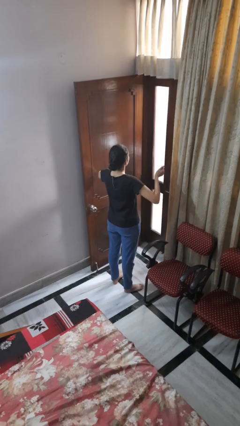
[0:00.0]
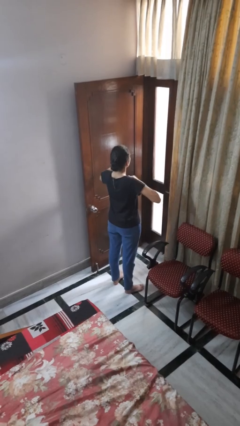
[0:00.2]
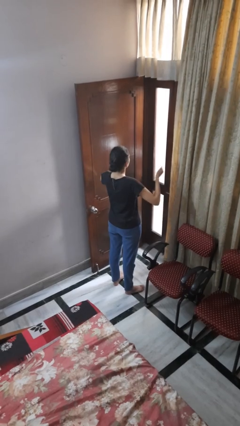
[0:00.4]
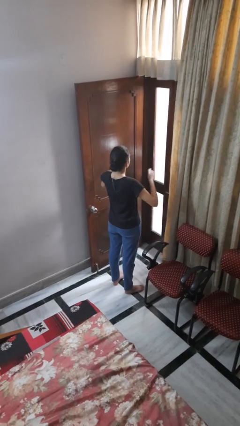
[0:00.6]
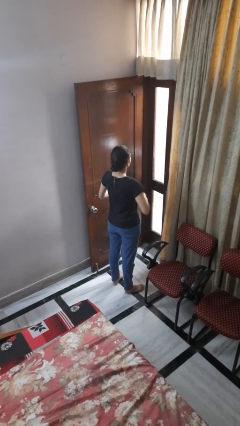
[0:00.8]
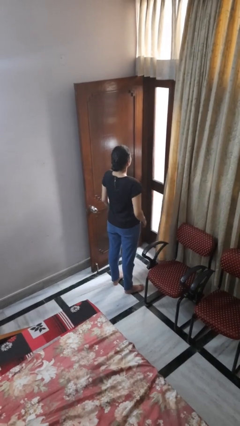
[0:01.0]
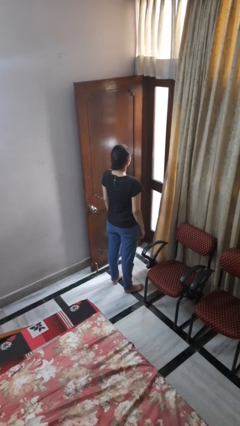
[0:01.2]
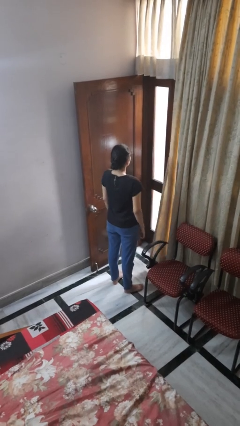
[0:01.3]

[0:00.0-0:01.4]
person drums on chest

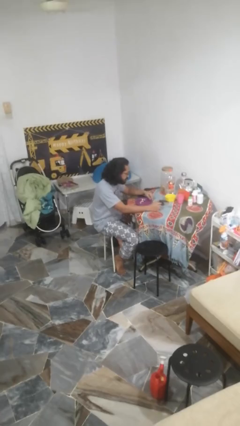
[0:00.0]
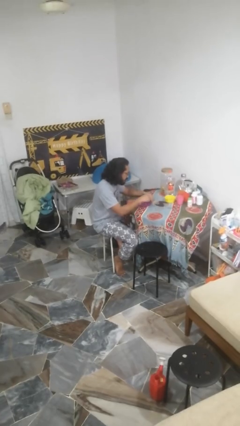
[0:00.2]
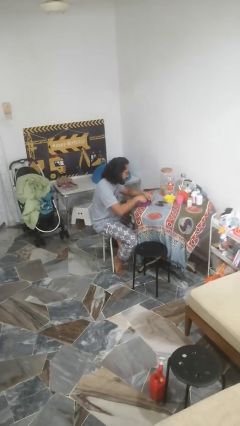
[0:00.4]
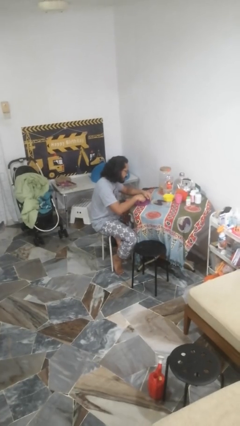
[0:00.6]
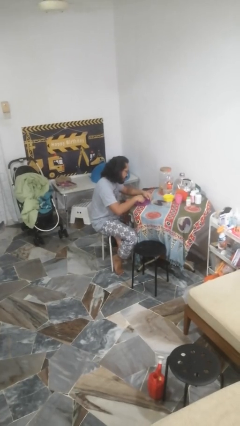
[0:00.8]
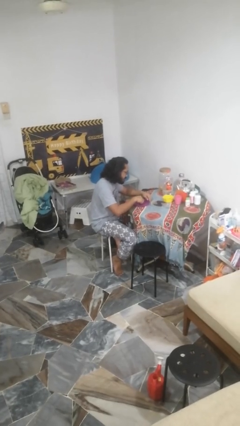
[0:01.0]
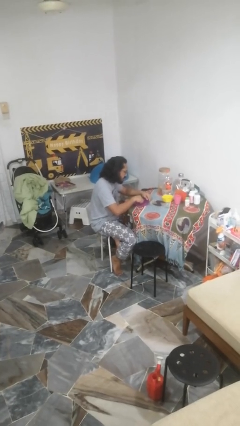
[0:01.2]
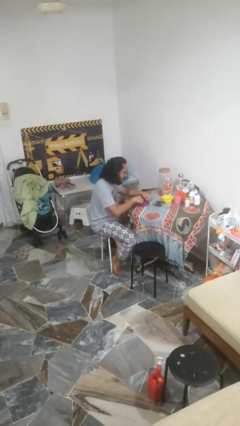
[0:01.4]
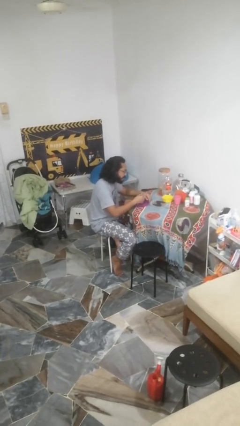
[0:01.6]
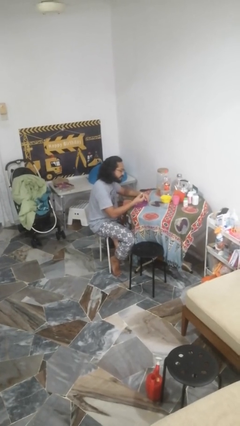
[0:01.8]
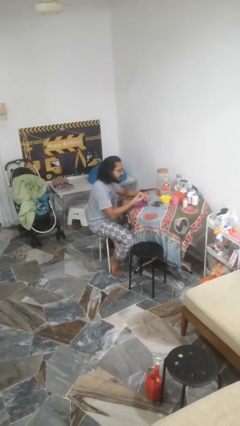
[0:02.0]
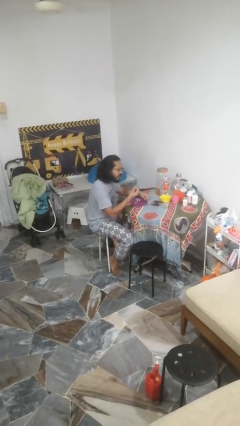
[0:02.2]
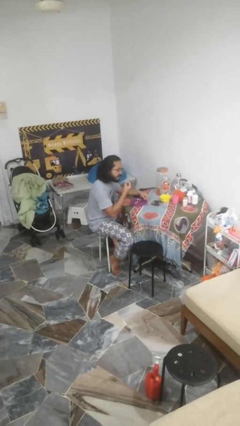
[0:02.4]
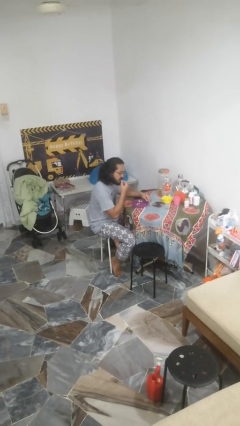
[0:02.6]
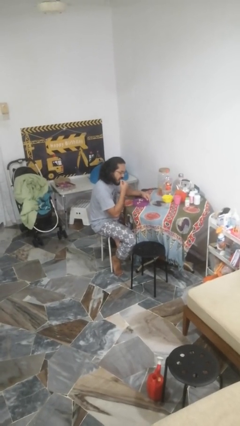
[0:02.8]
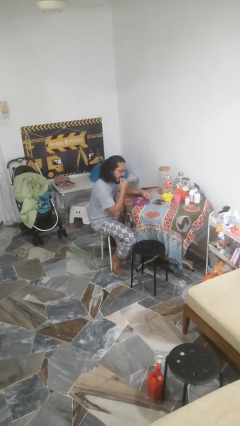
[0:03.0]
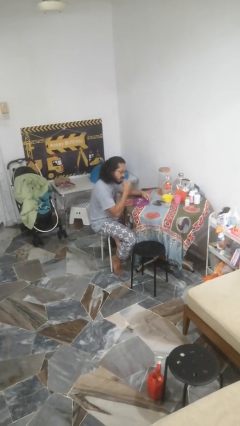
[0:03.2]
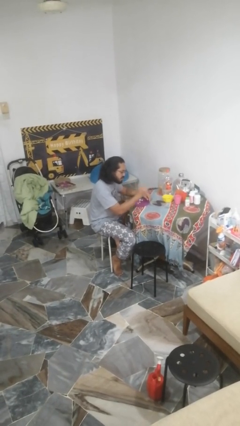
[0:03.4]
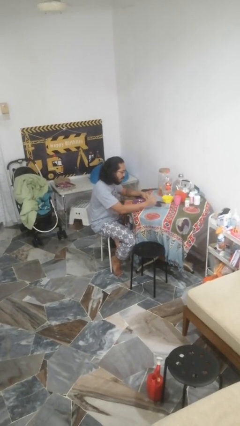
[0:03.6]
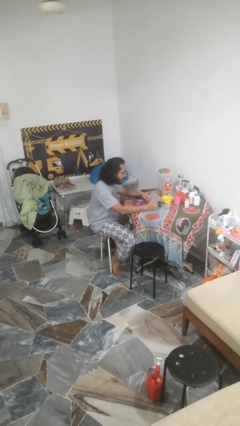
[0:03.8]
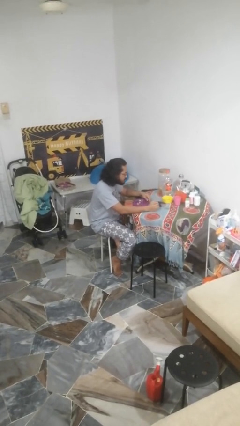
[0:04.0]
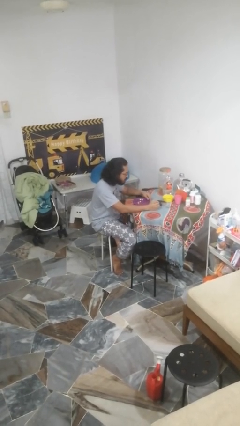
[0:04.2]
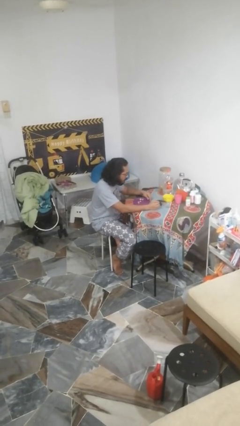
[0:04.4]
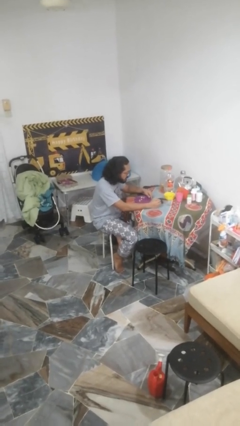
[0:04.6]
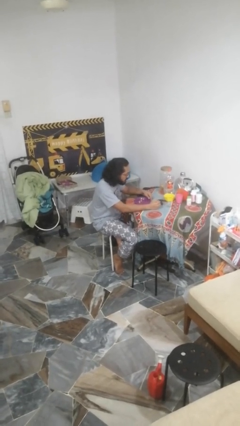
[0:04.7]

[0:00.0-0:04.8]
person eats with hands

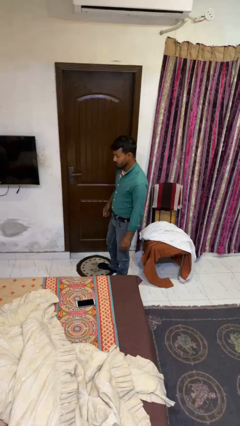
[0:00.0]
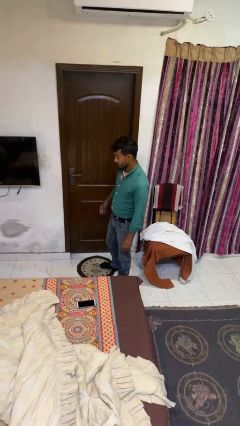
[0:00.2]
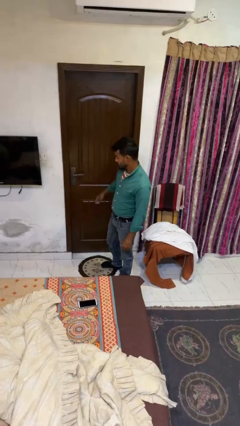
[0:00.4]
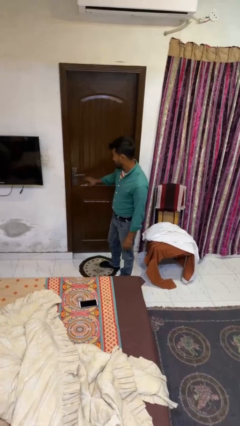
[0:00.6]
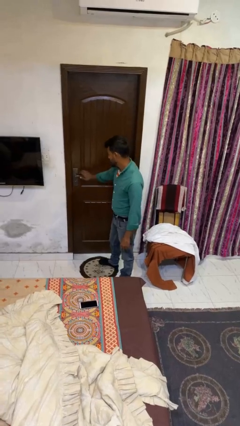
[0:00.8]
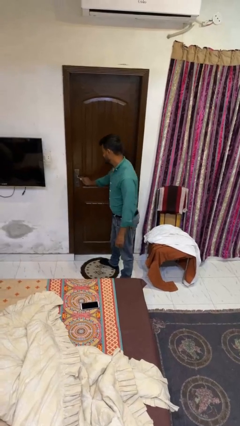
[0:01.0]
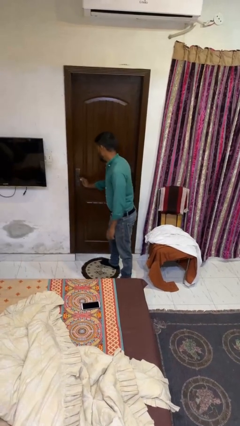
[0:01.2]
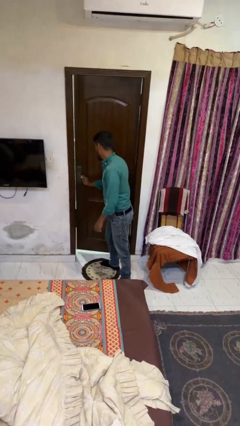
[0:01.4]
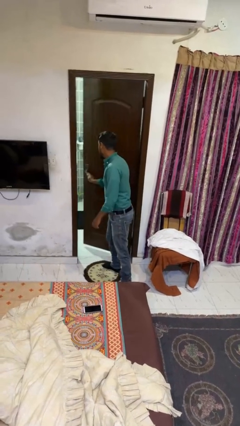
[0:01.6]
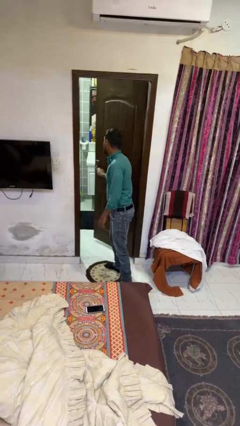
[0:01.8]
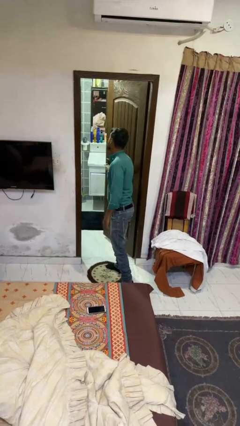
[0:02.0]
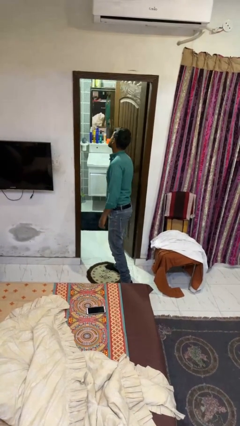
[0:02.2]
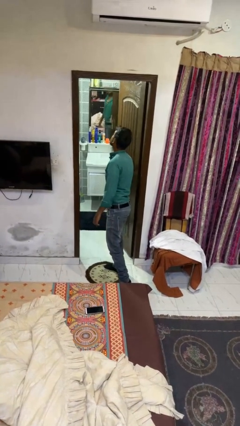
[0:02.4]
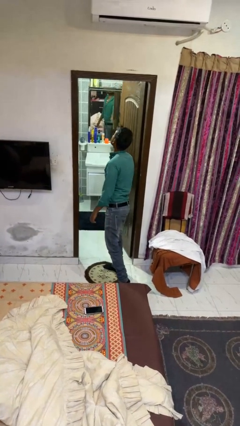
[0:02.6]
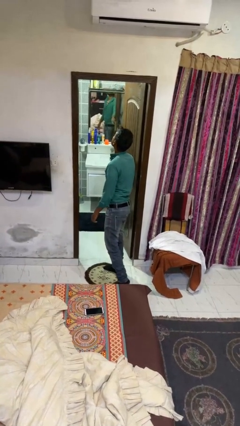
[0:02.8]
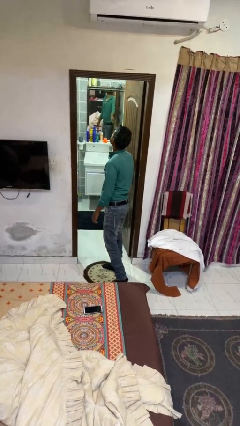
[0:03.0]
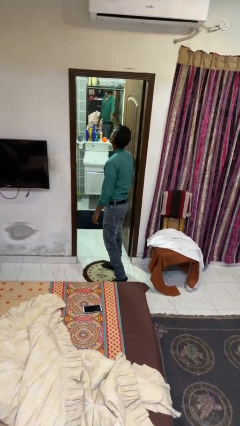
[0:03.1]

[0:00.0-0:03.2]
person opens facility door

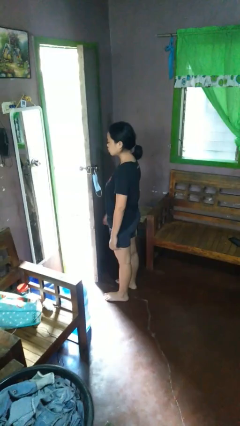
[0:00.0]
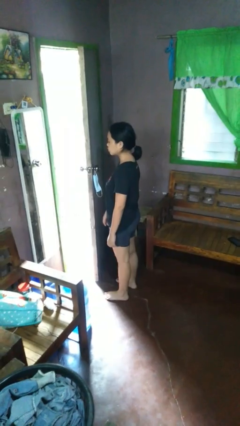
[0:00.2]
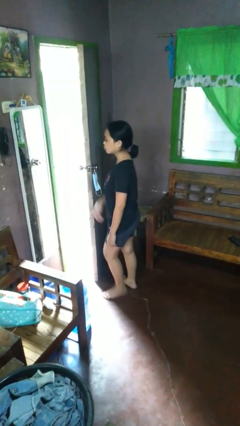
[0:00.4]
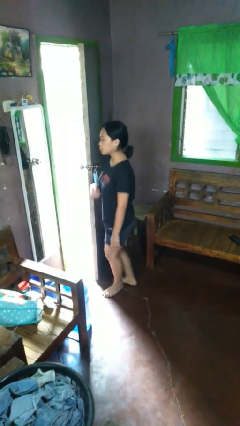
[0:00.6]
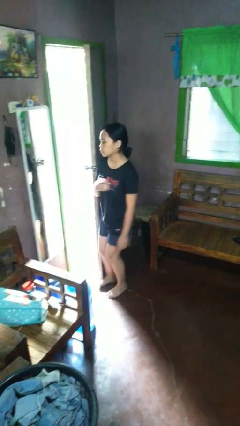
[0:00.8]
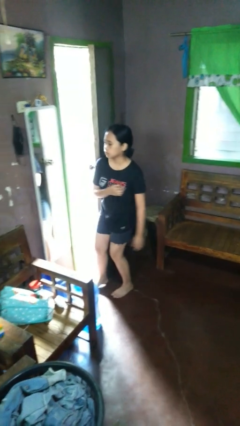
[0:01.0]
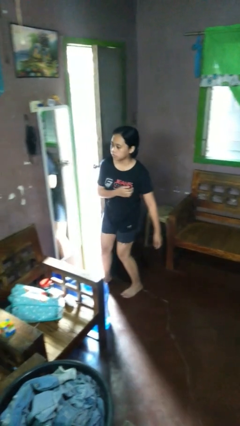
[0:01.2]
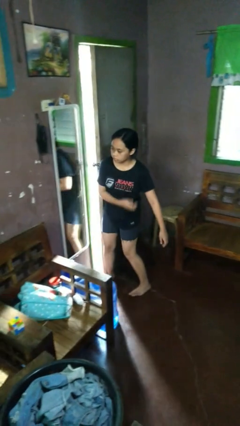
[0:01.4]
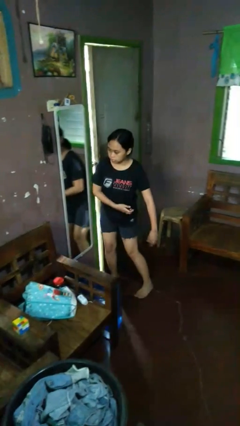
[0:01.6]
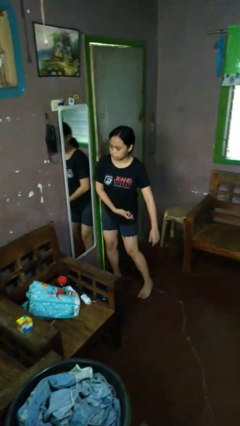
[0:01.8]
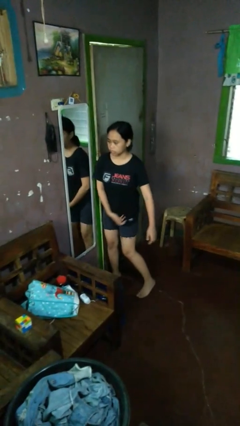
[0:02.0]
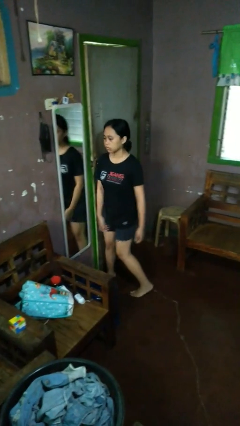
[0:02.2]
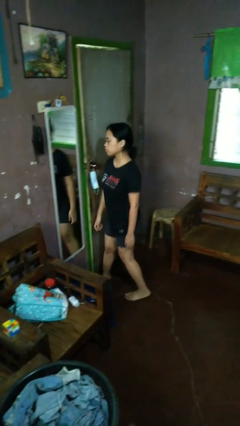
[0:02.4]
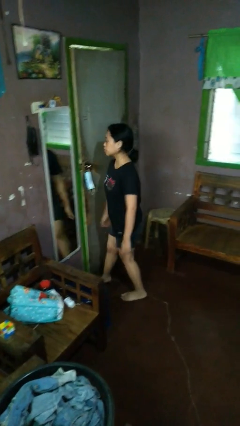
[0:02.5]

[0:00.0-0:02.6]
person closes door with hip

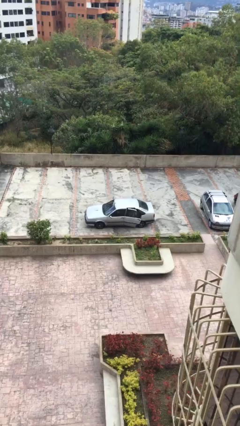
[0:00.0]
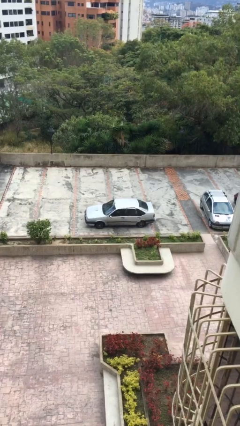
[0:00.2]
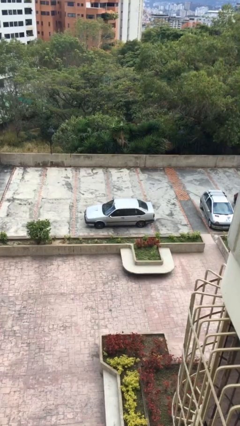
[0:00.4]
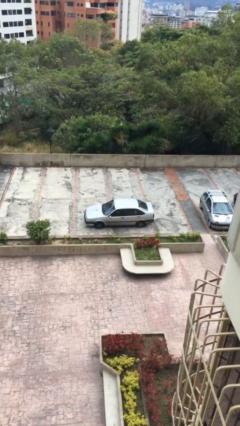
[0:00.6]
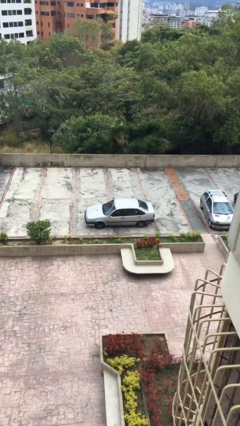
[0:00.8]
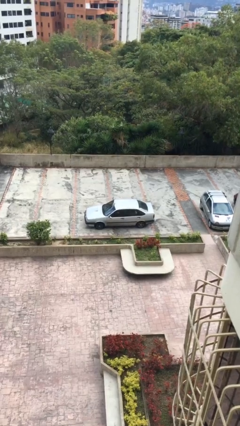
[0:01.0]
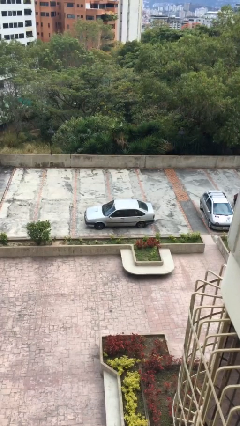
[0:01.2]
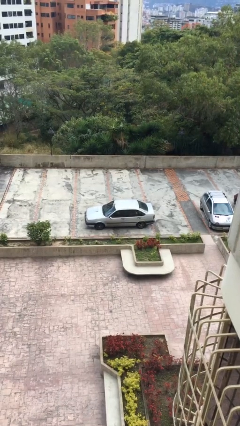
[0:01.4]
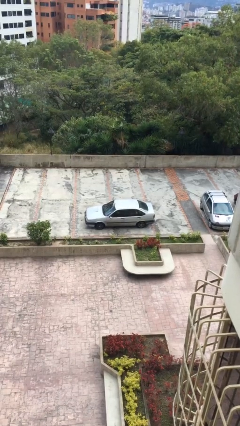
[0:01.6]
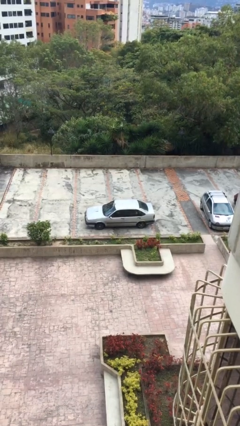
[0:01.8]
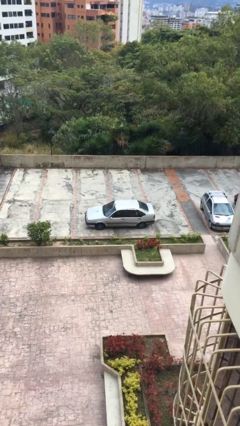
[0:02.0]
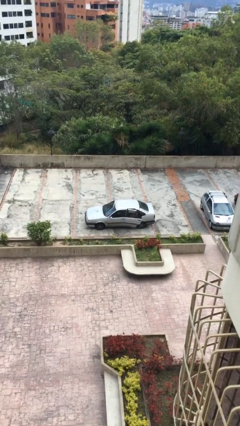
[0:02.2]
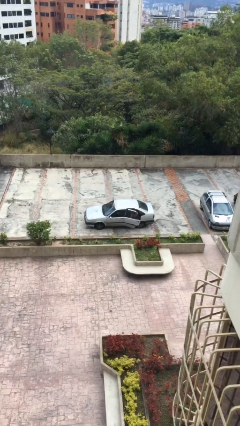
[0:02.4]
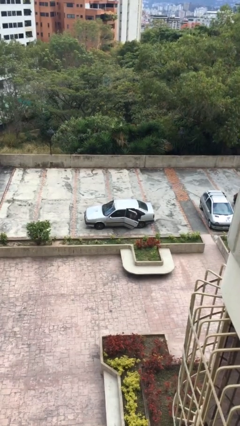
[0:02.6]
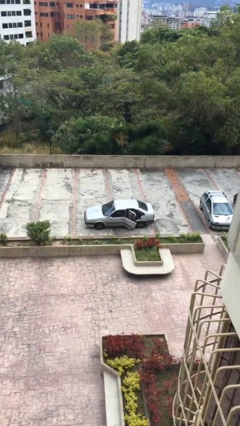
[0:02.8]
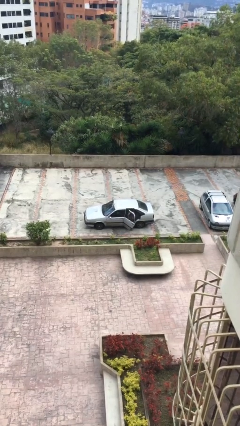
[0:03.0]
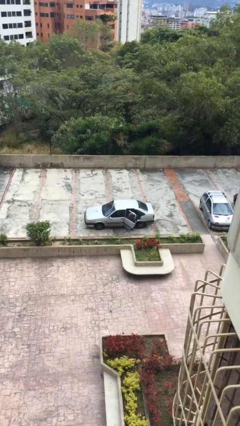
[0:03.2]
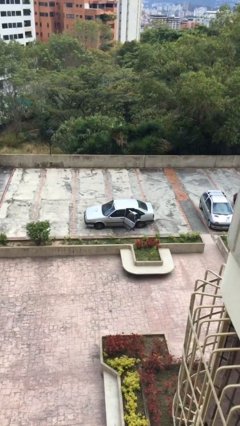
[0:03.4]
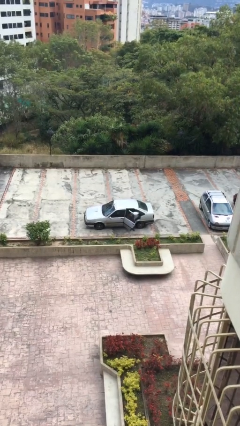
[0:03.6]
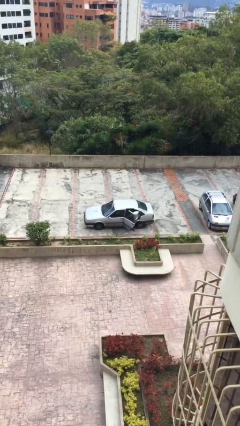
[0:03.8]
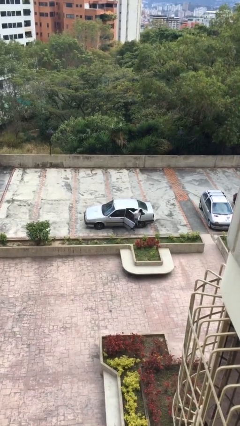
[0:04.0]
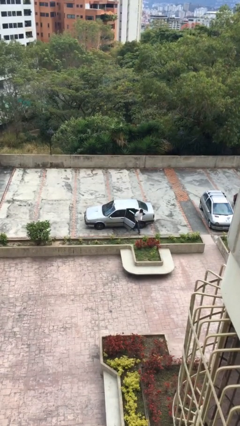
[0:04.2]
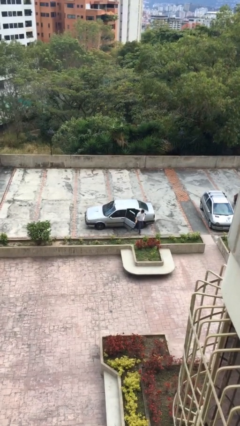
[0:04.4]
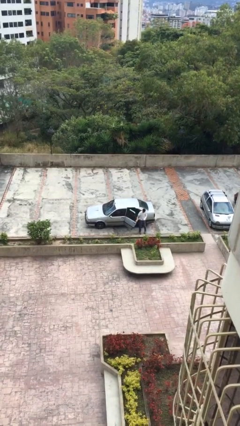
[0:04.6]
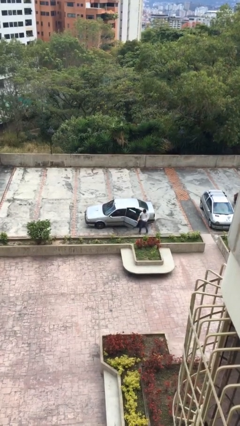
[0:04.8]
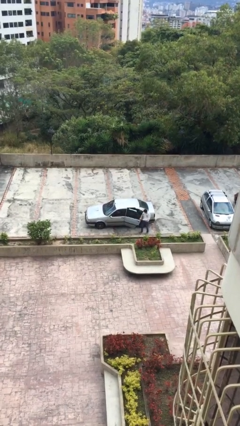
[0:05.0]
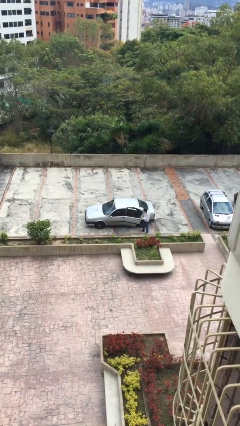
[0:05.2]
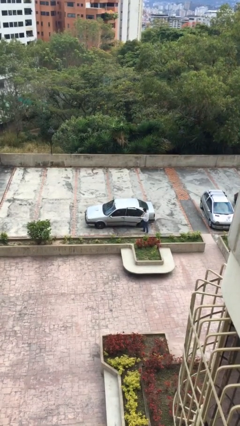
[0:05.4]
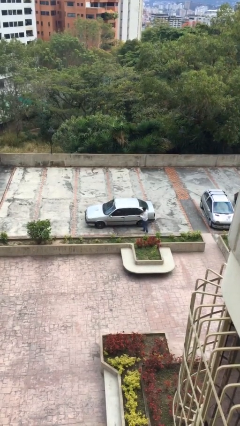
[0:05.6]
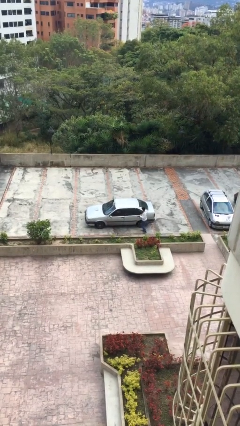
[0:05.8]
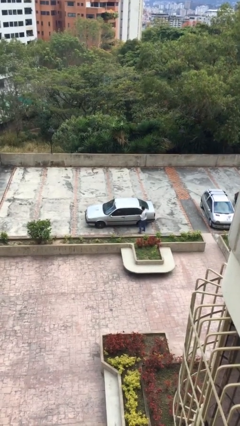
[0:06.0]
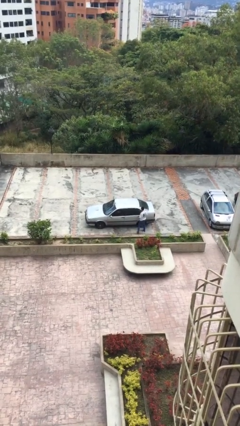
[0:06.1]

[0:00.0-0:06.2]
car drops off person
